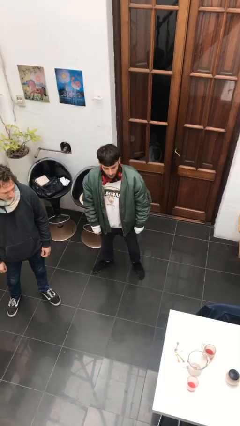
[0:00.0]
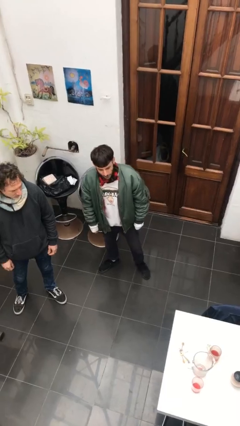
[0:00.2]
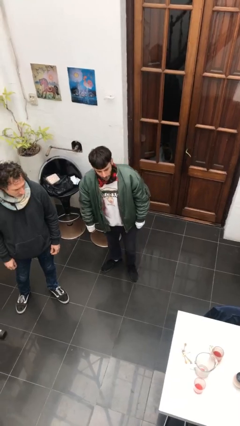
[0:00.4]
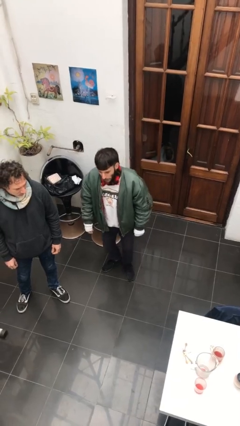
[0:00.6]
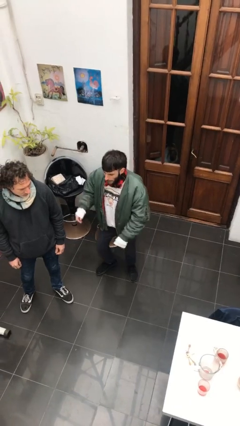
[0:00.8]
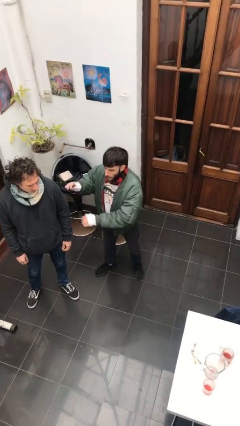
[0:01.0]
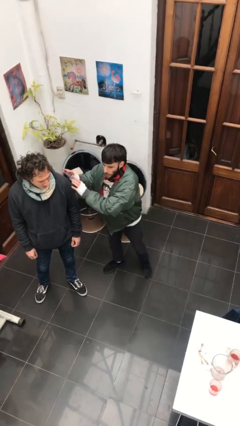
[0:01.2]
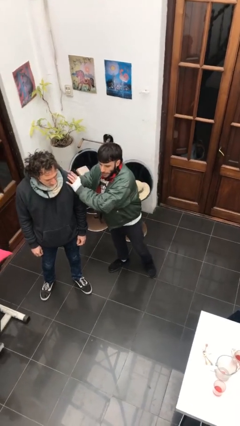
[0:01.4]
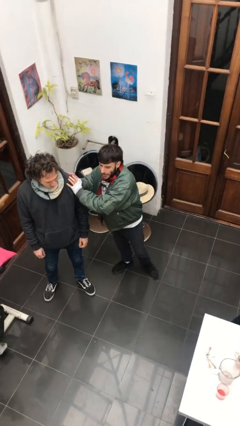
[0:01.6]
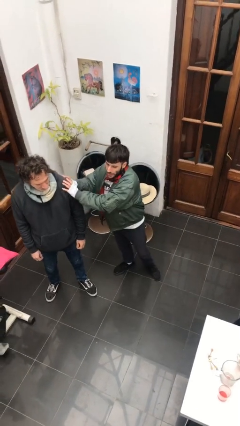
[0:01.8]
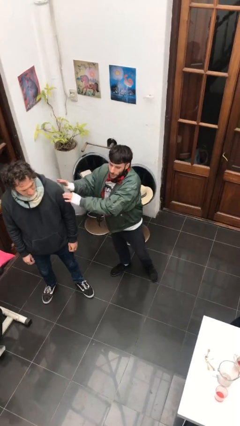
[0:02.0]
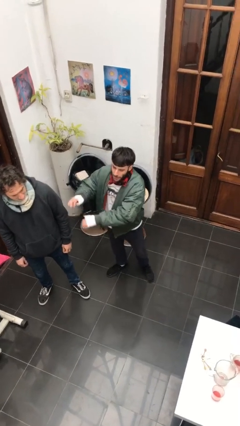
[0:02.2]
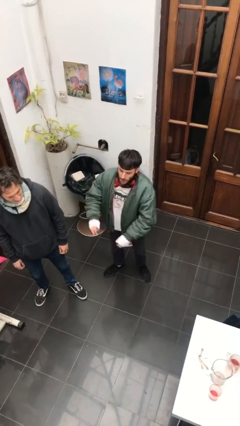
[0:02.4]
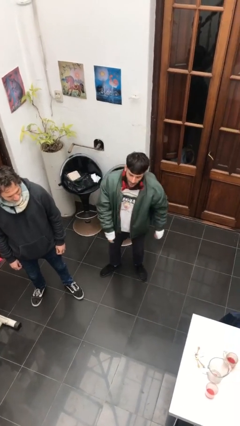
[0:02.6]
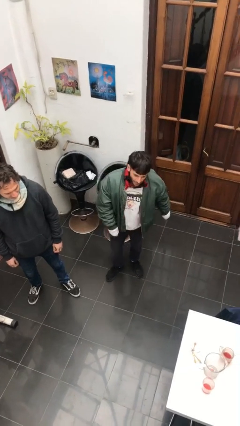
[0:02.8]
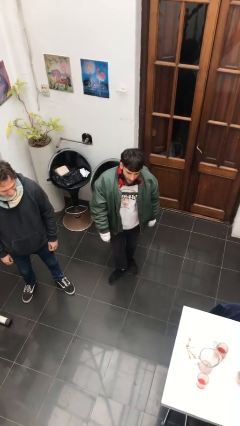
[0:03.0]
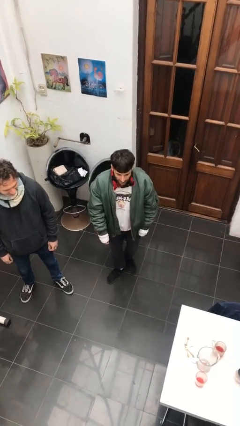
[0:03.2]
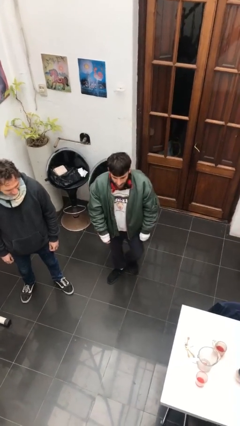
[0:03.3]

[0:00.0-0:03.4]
person shoves person

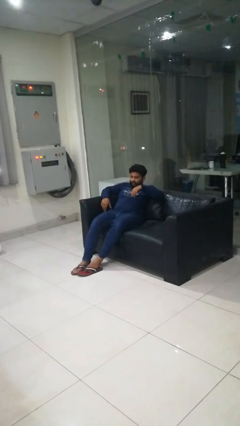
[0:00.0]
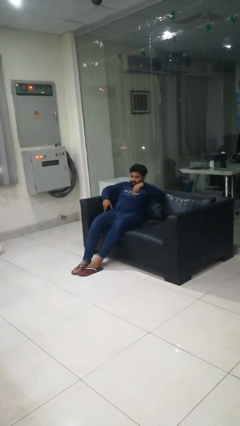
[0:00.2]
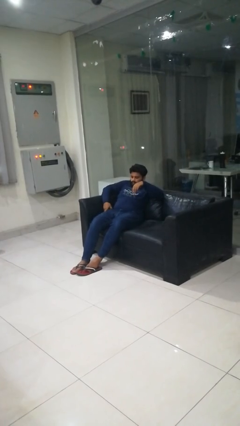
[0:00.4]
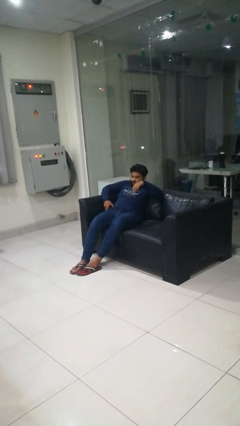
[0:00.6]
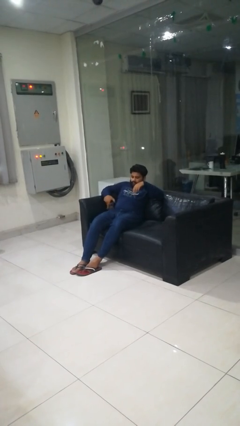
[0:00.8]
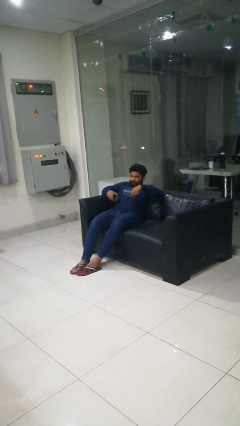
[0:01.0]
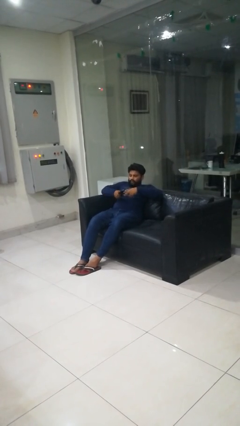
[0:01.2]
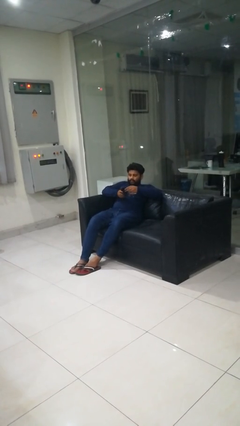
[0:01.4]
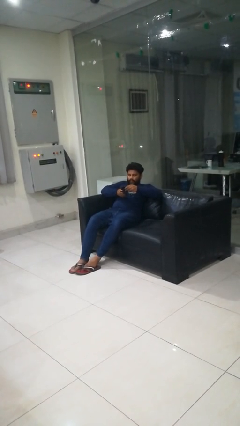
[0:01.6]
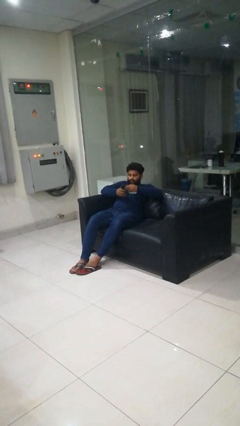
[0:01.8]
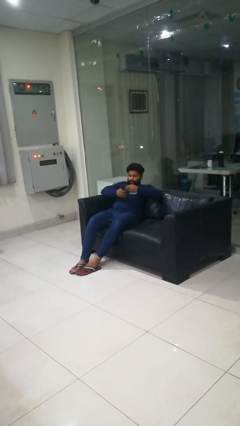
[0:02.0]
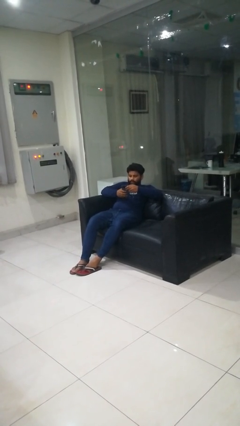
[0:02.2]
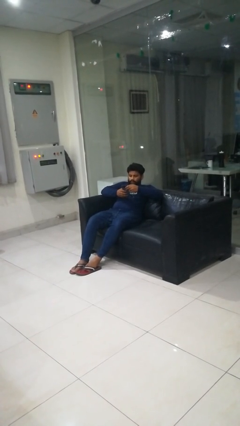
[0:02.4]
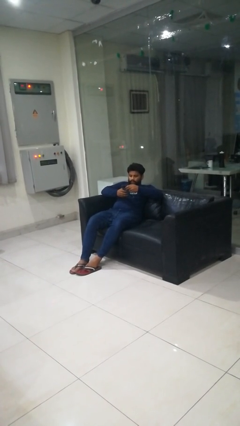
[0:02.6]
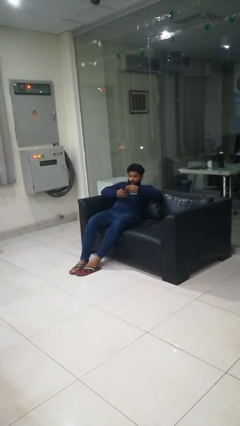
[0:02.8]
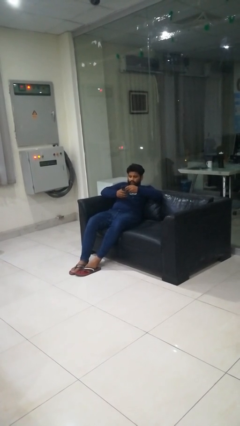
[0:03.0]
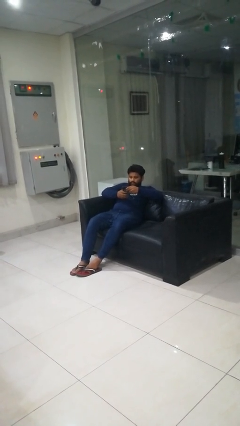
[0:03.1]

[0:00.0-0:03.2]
person takes phone from pocket

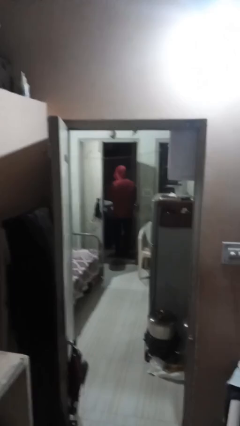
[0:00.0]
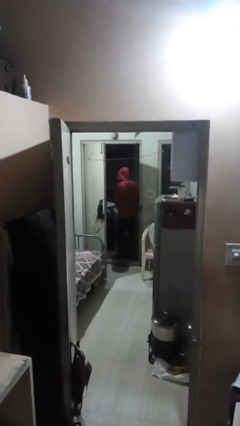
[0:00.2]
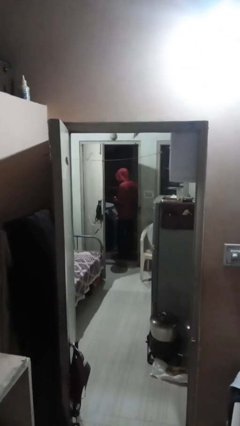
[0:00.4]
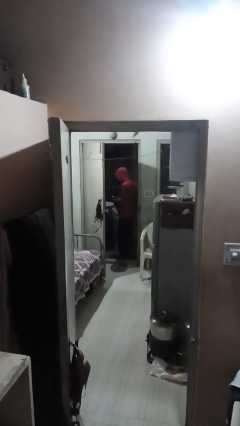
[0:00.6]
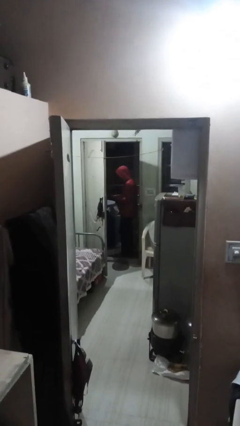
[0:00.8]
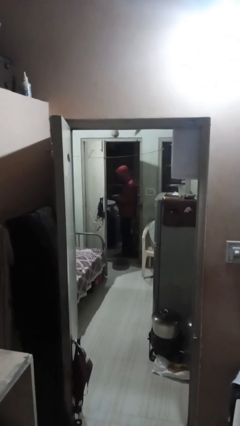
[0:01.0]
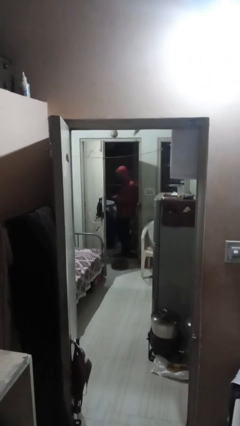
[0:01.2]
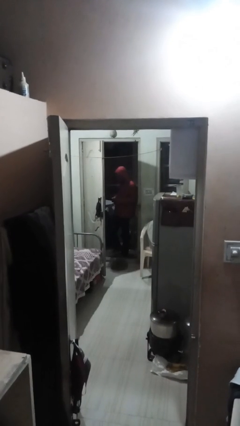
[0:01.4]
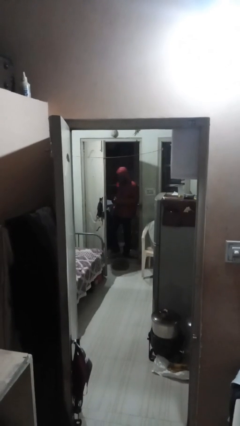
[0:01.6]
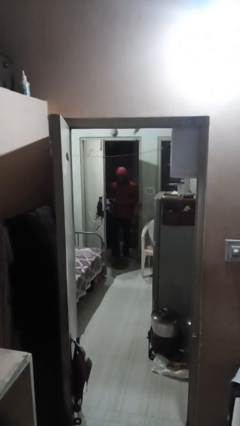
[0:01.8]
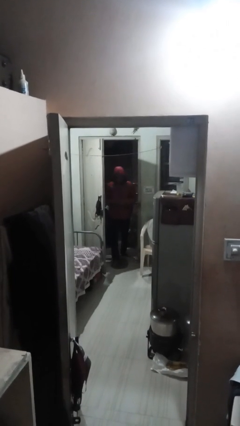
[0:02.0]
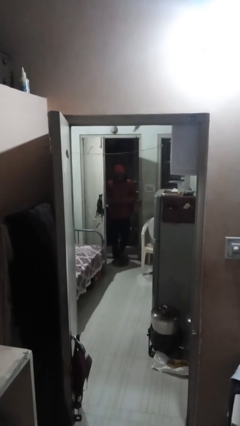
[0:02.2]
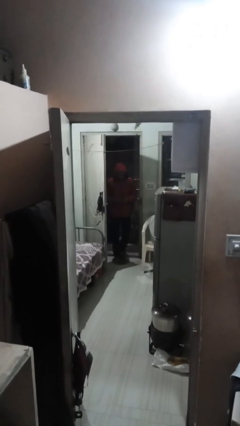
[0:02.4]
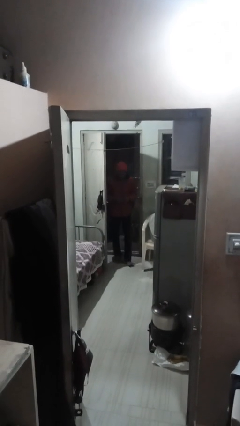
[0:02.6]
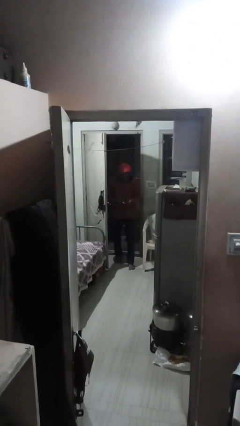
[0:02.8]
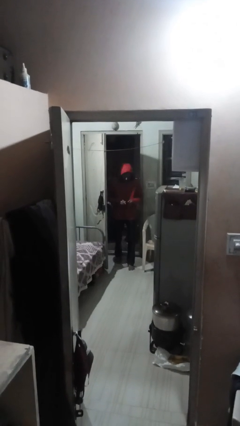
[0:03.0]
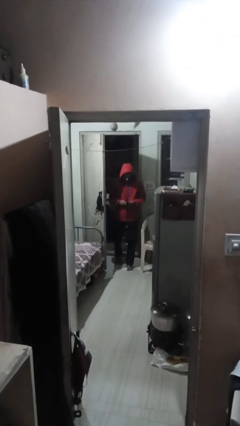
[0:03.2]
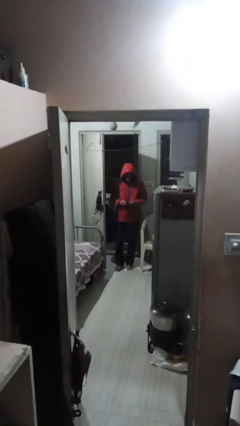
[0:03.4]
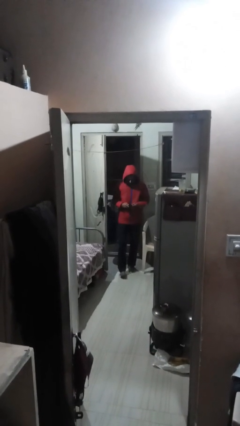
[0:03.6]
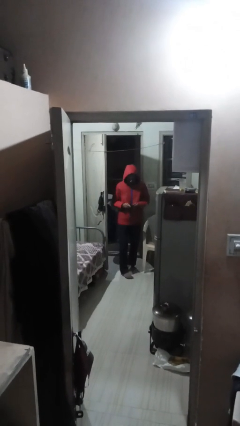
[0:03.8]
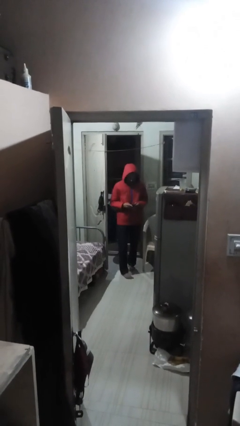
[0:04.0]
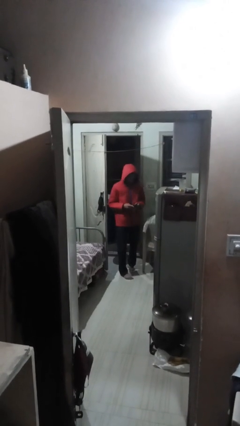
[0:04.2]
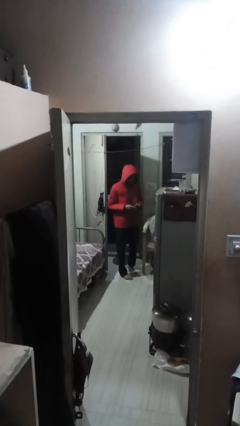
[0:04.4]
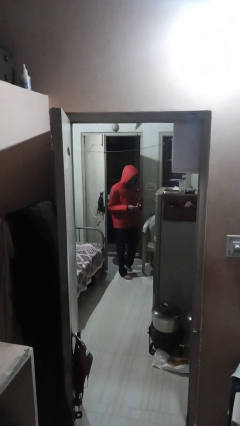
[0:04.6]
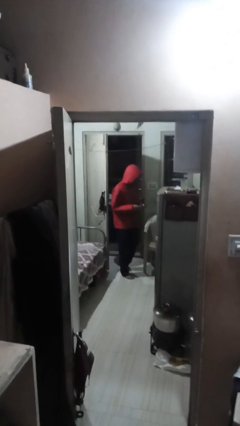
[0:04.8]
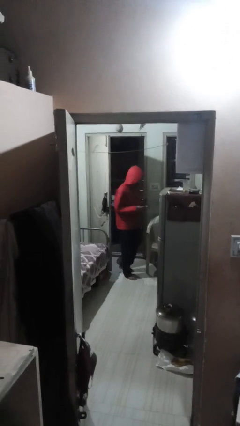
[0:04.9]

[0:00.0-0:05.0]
person enters scene through structure

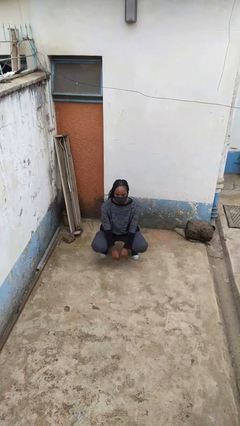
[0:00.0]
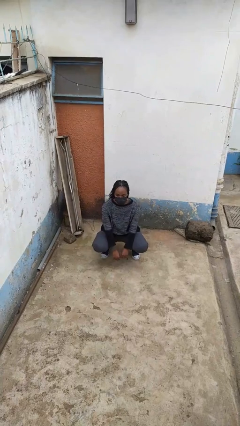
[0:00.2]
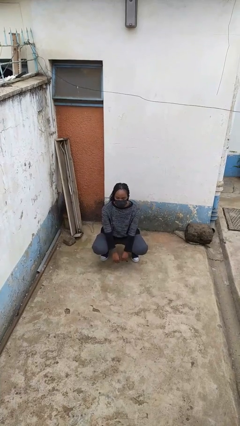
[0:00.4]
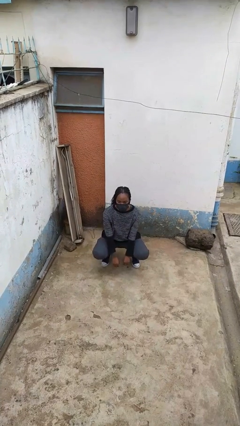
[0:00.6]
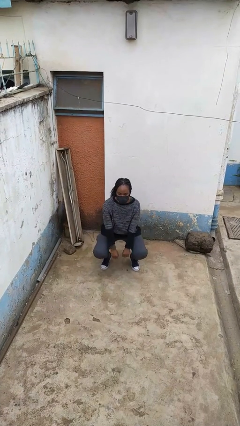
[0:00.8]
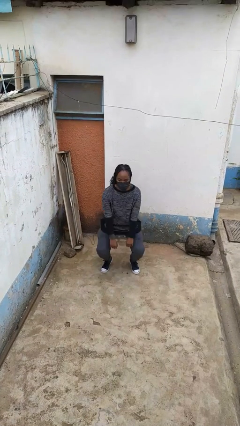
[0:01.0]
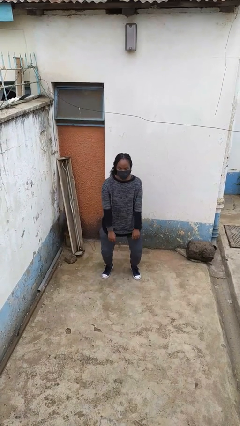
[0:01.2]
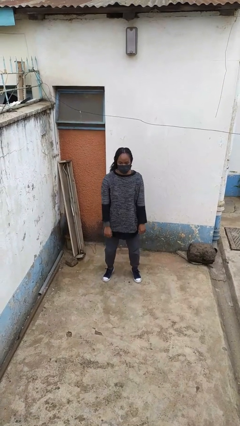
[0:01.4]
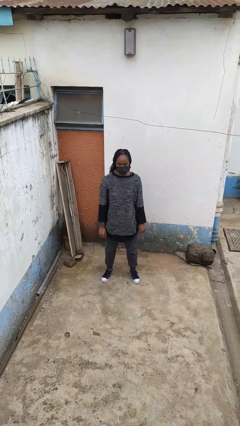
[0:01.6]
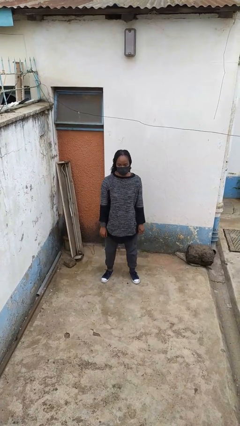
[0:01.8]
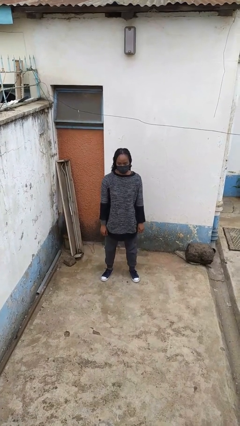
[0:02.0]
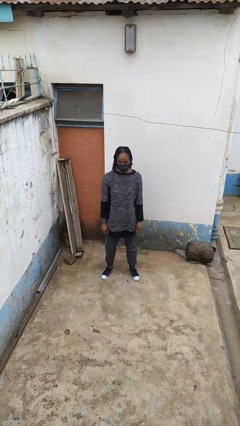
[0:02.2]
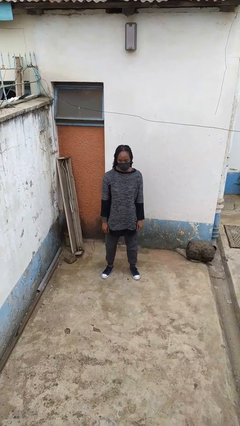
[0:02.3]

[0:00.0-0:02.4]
person stands up

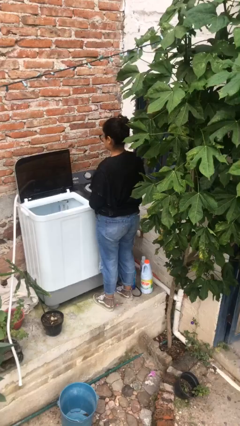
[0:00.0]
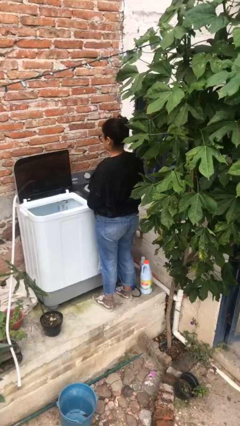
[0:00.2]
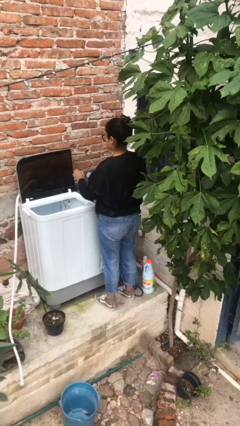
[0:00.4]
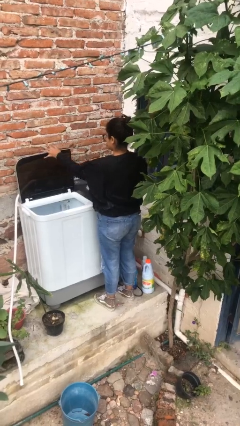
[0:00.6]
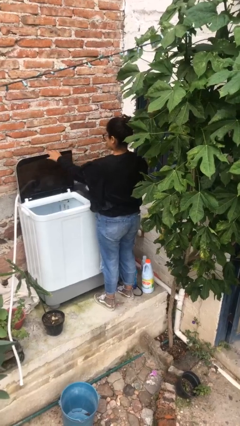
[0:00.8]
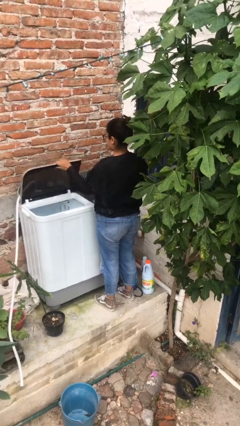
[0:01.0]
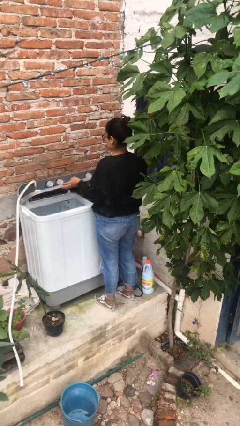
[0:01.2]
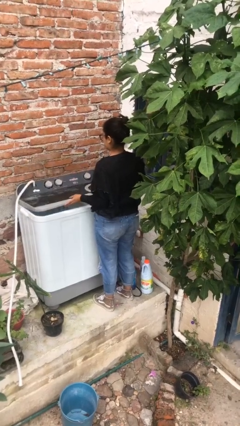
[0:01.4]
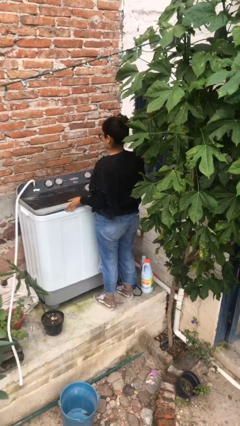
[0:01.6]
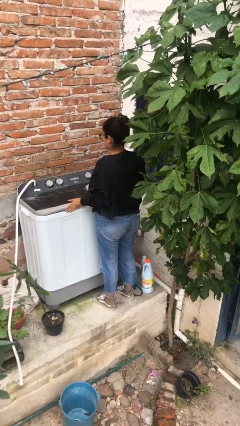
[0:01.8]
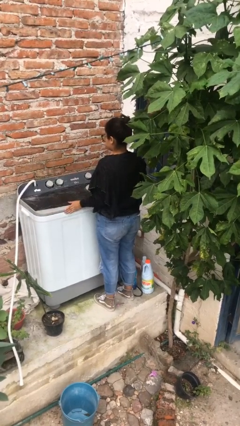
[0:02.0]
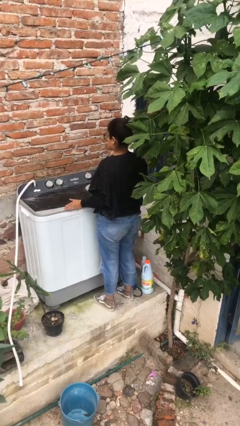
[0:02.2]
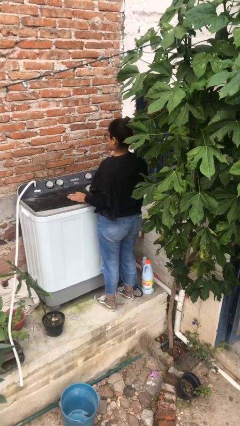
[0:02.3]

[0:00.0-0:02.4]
person closes clothes washer

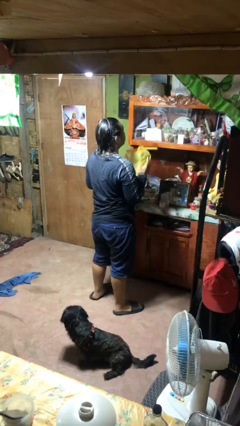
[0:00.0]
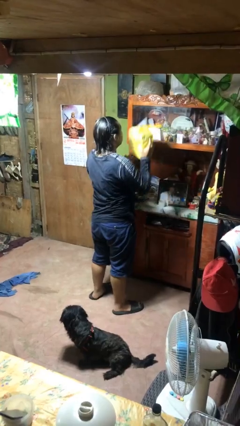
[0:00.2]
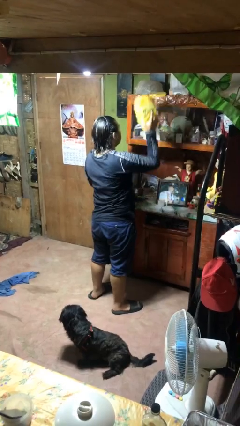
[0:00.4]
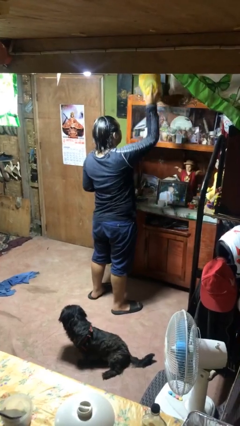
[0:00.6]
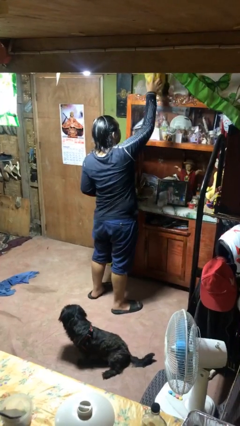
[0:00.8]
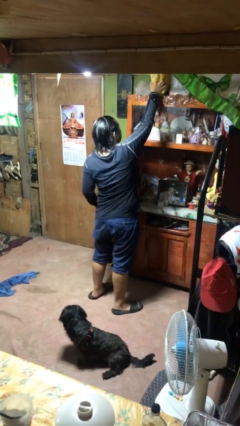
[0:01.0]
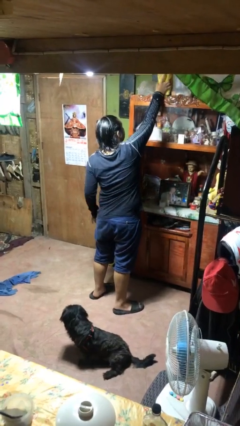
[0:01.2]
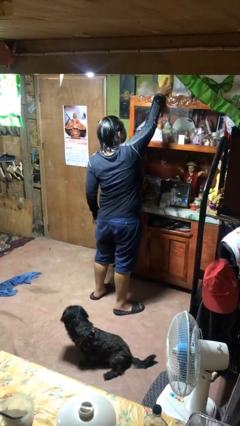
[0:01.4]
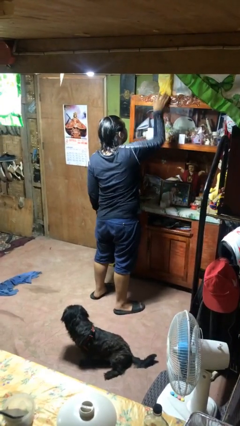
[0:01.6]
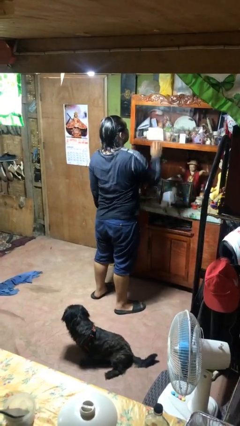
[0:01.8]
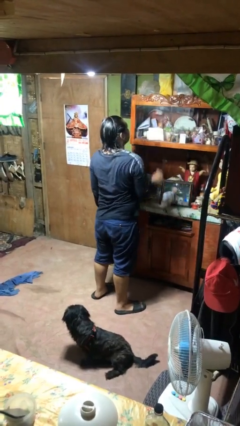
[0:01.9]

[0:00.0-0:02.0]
person puts down object on shelf
